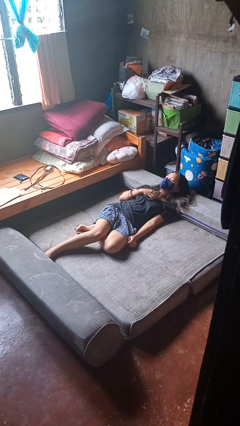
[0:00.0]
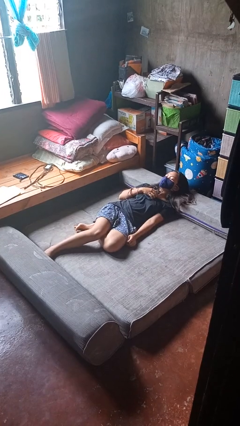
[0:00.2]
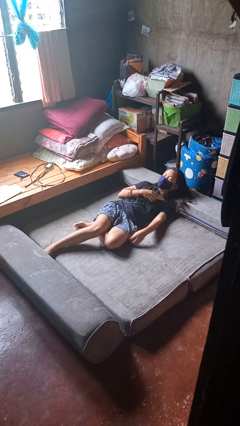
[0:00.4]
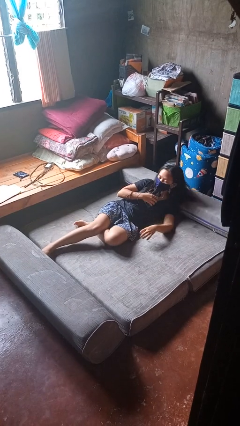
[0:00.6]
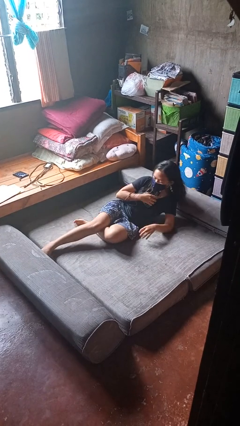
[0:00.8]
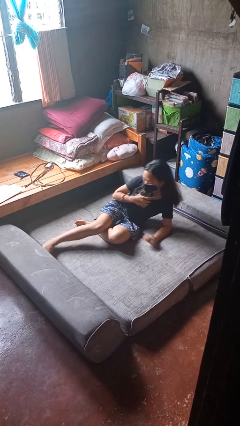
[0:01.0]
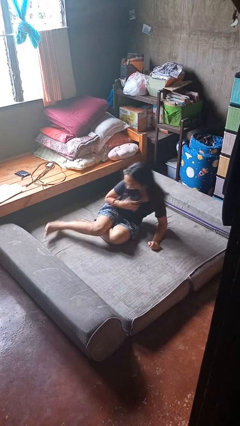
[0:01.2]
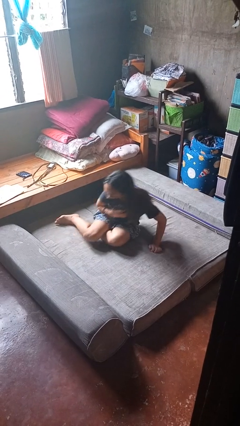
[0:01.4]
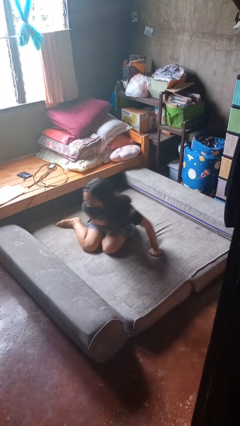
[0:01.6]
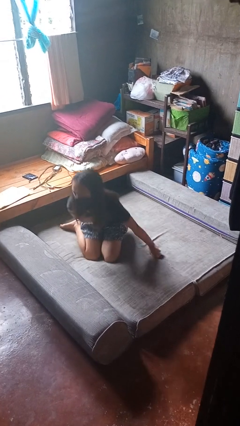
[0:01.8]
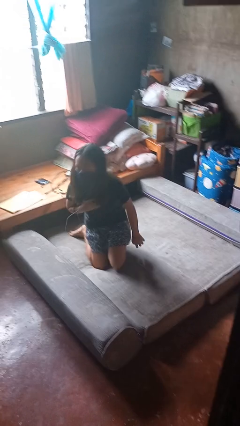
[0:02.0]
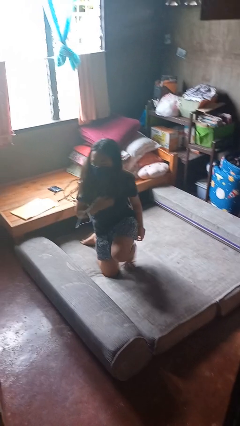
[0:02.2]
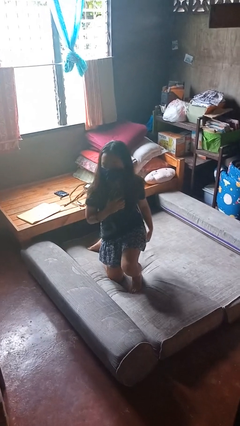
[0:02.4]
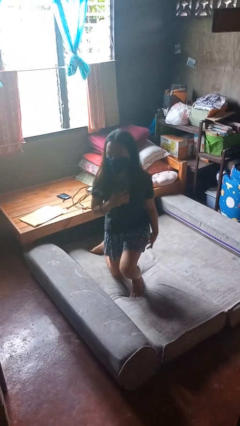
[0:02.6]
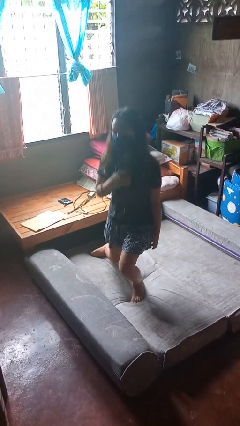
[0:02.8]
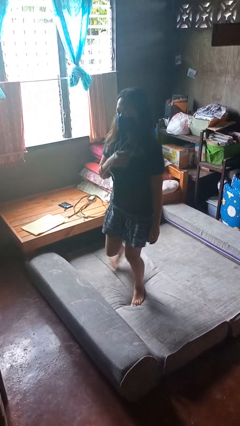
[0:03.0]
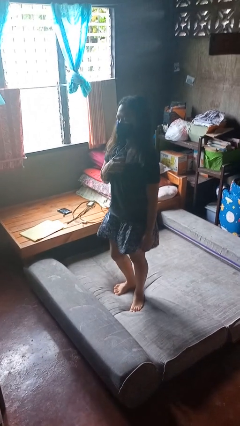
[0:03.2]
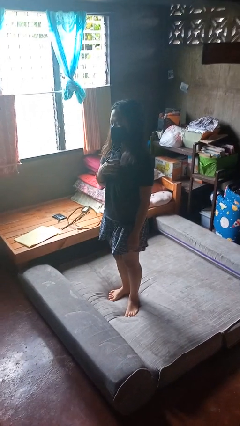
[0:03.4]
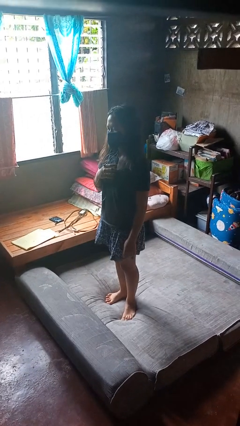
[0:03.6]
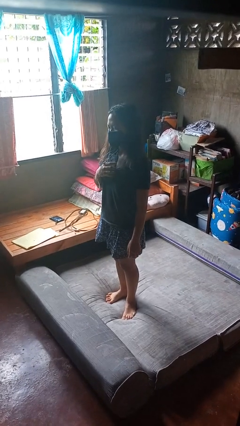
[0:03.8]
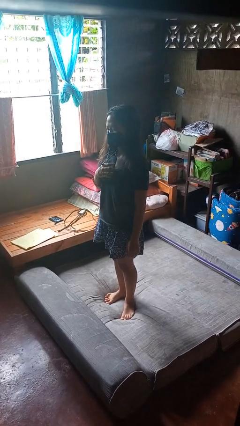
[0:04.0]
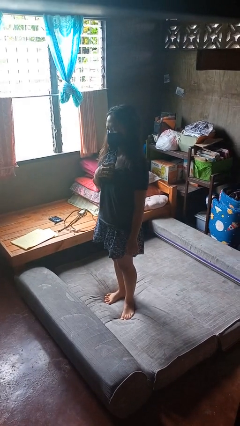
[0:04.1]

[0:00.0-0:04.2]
person stands up

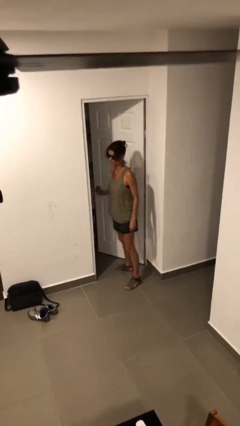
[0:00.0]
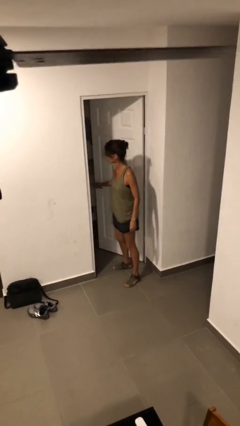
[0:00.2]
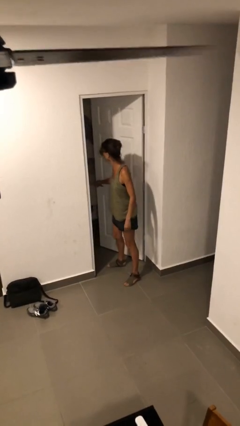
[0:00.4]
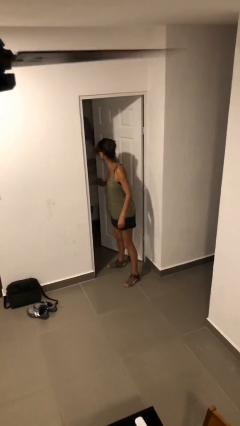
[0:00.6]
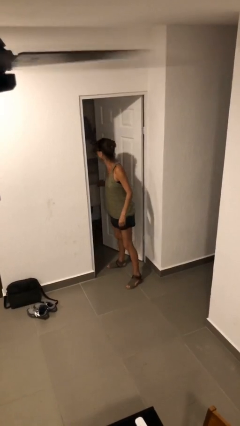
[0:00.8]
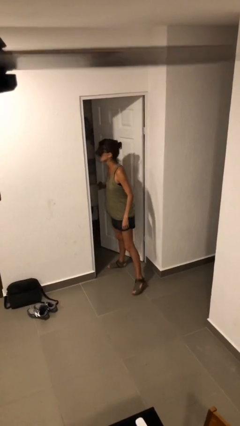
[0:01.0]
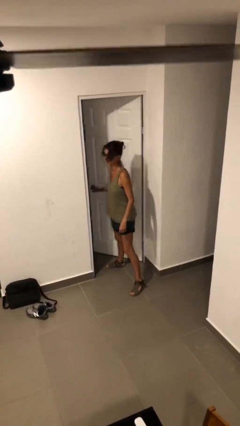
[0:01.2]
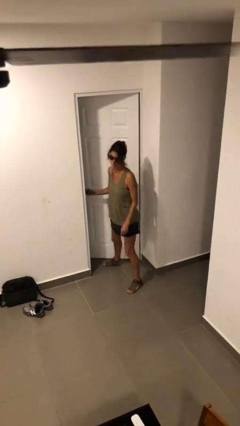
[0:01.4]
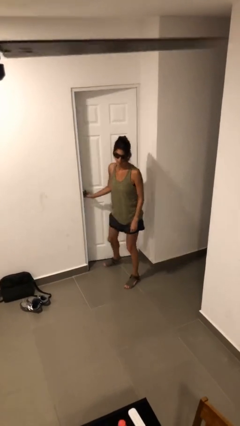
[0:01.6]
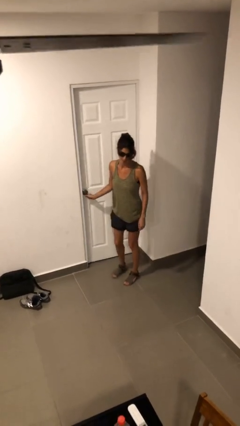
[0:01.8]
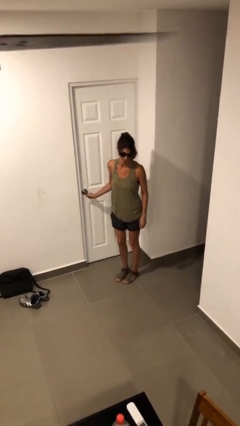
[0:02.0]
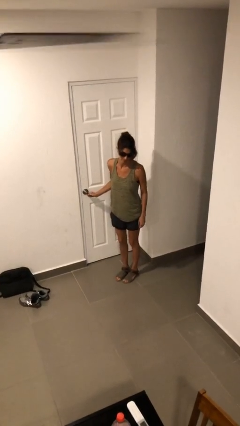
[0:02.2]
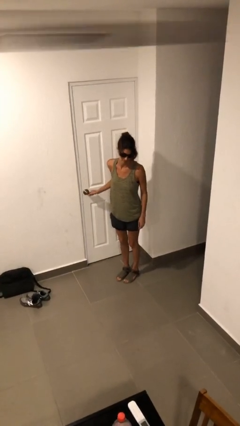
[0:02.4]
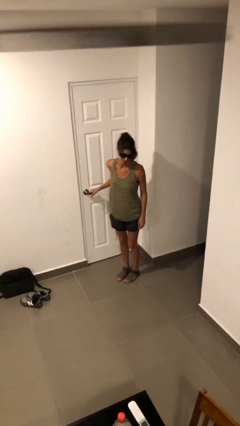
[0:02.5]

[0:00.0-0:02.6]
person closes facility door

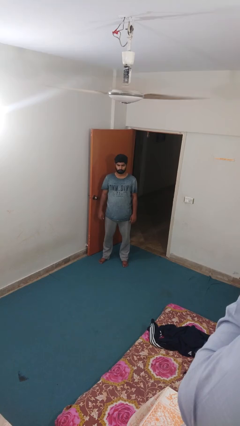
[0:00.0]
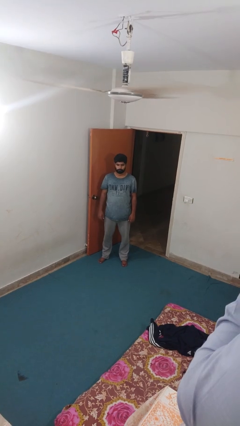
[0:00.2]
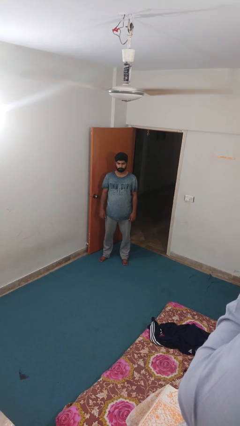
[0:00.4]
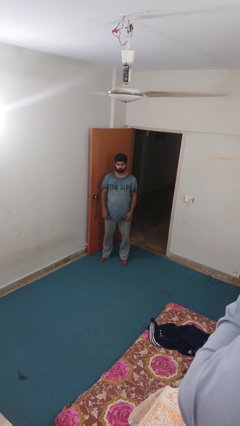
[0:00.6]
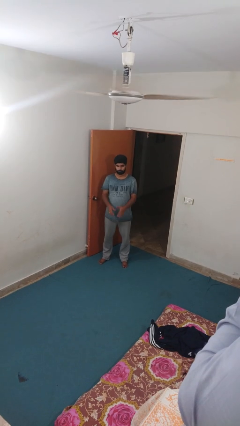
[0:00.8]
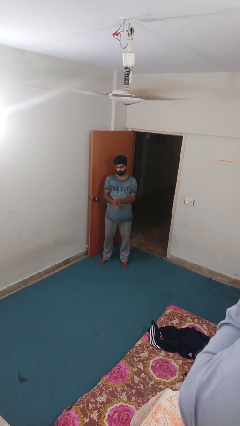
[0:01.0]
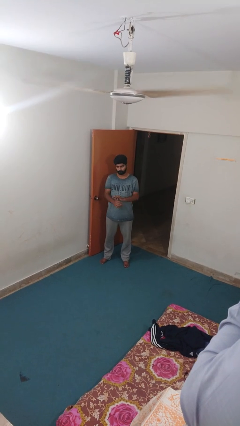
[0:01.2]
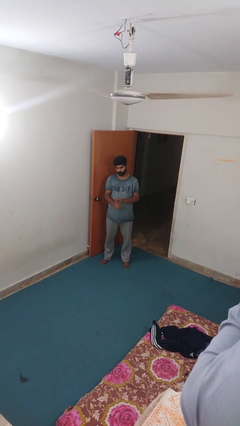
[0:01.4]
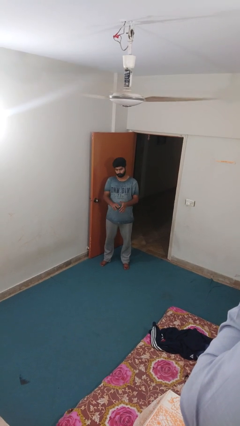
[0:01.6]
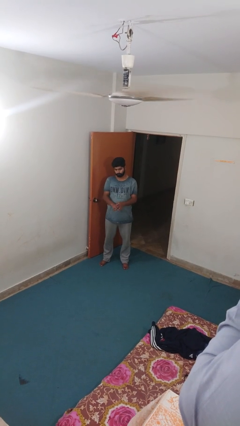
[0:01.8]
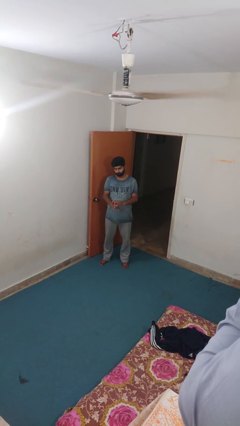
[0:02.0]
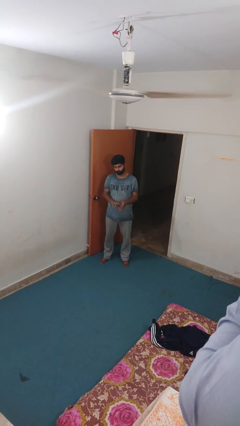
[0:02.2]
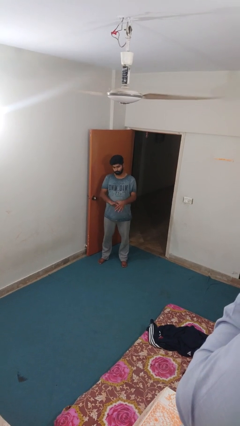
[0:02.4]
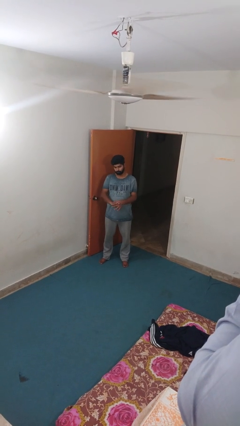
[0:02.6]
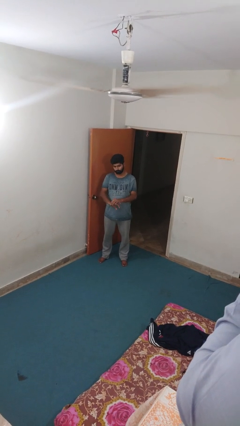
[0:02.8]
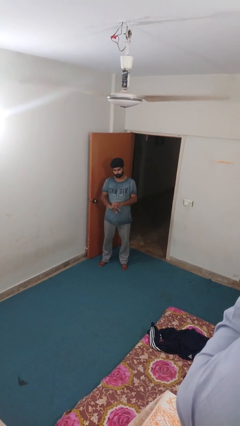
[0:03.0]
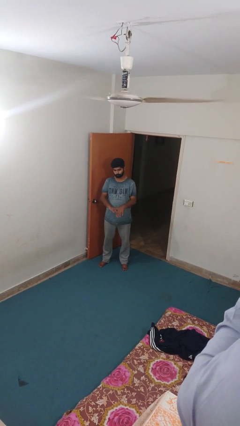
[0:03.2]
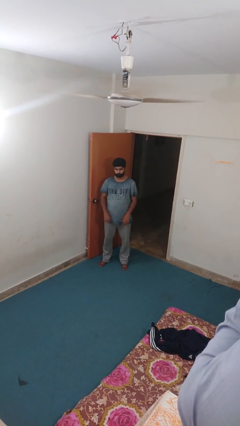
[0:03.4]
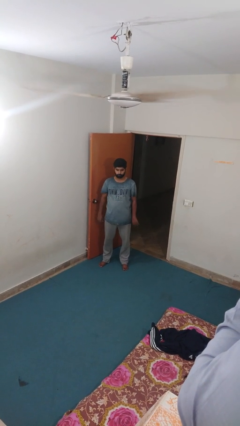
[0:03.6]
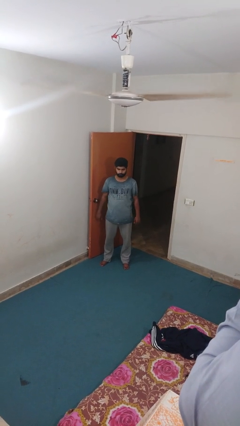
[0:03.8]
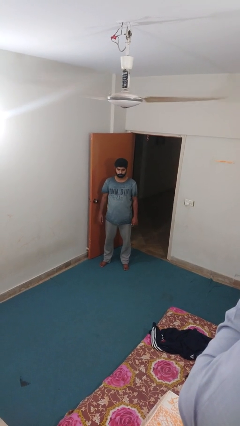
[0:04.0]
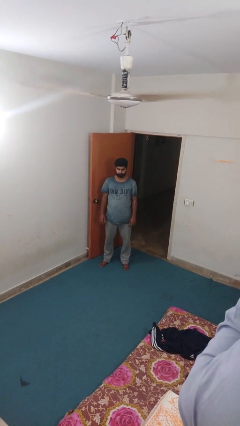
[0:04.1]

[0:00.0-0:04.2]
person snaps fingers

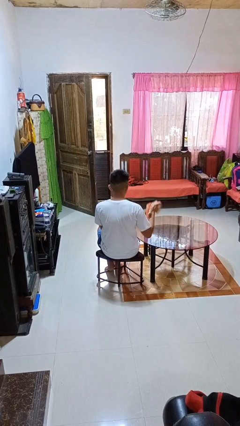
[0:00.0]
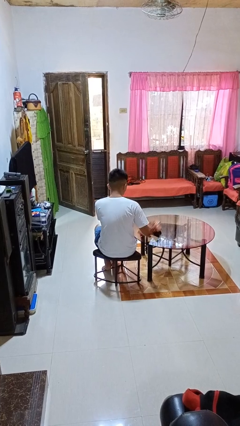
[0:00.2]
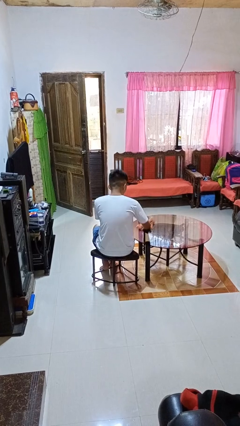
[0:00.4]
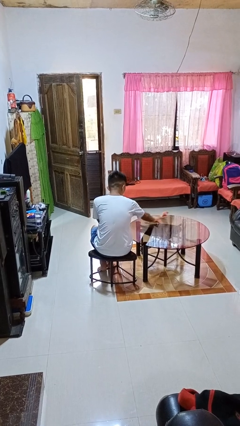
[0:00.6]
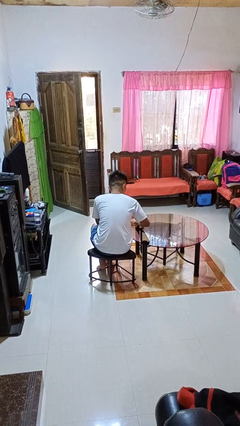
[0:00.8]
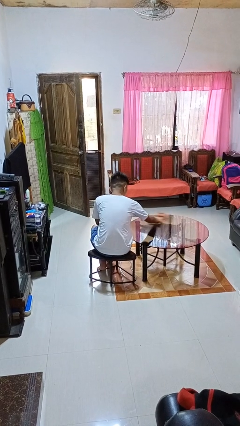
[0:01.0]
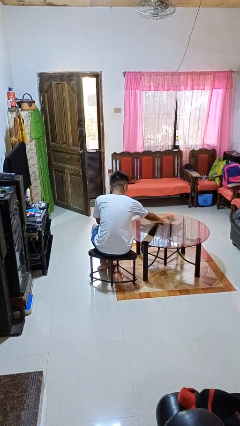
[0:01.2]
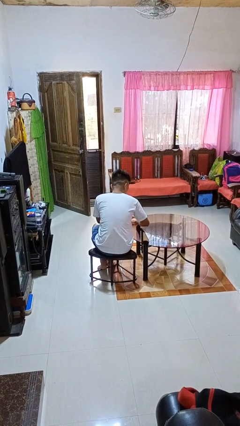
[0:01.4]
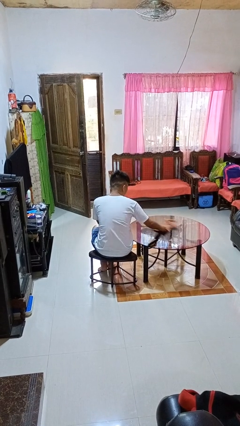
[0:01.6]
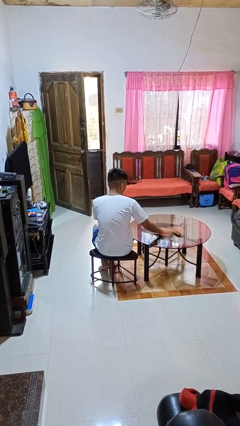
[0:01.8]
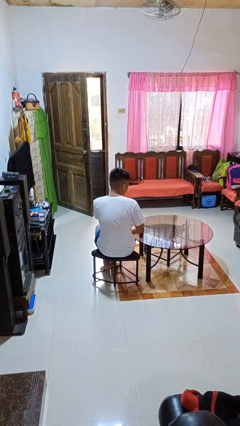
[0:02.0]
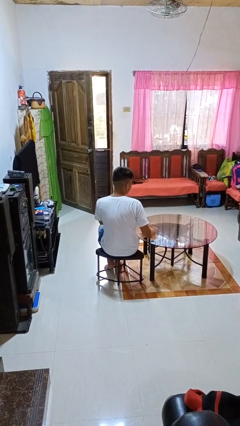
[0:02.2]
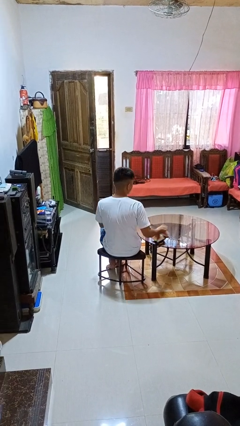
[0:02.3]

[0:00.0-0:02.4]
person cleans table with rag

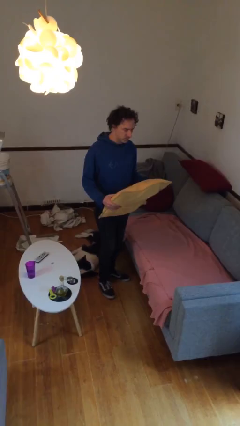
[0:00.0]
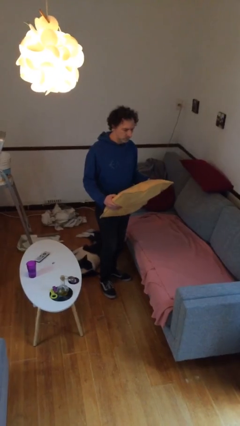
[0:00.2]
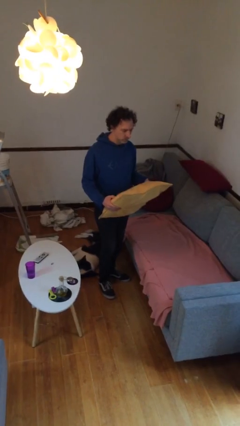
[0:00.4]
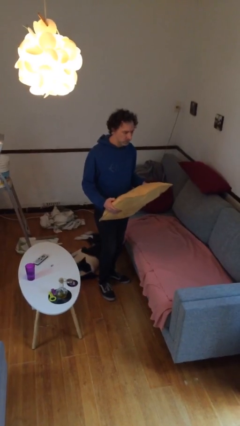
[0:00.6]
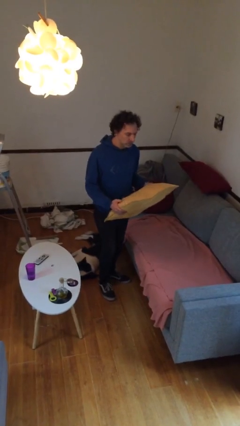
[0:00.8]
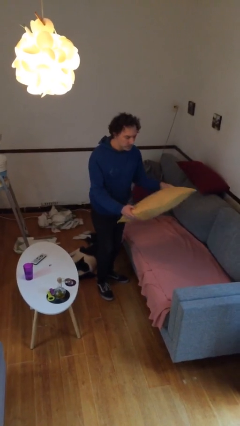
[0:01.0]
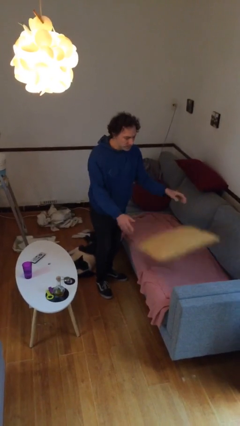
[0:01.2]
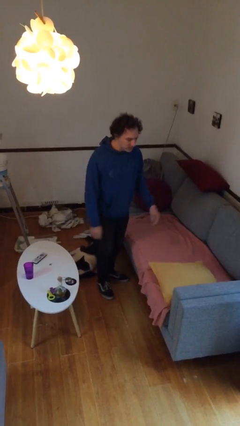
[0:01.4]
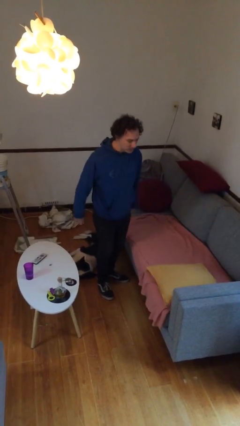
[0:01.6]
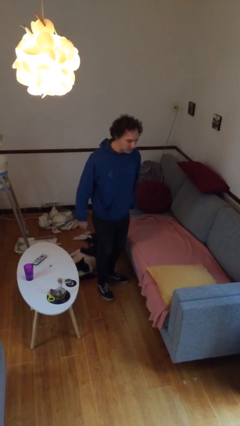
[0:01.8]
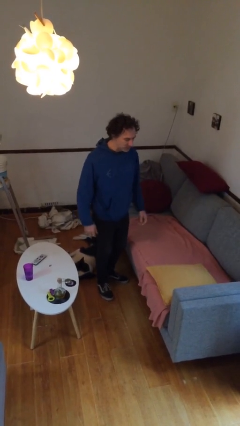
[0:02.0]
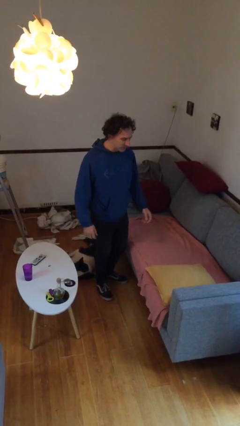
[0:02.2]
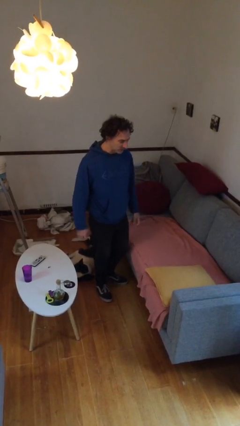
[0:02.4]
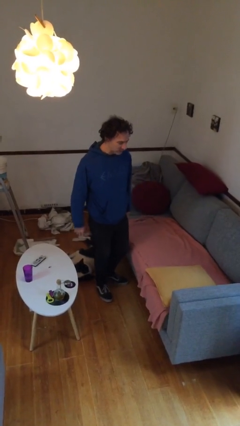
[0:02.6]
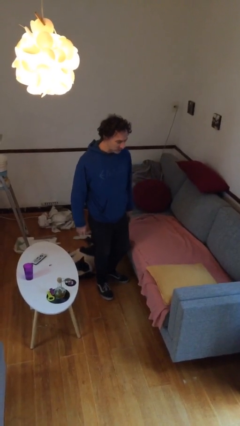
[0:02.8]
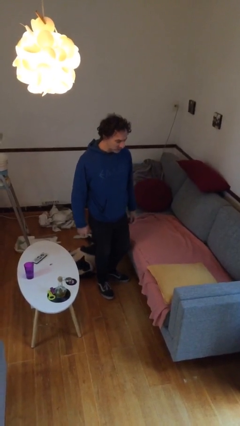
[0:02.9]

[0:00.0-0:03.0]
person puts down object on couch

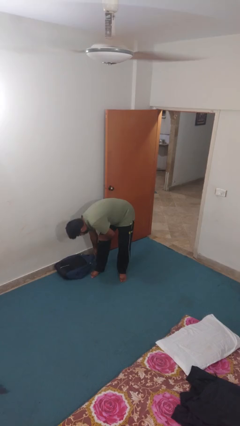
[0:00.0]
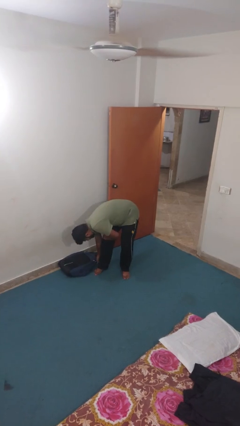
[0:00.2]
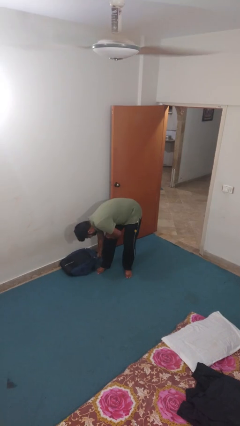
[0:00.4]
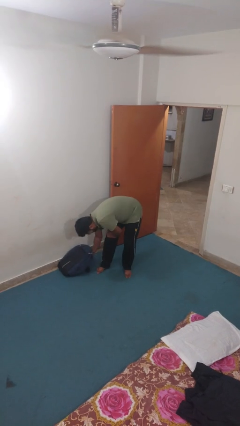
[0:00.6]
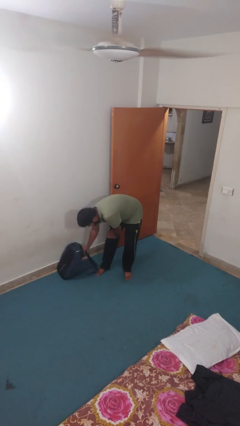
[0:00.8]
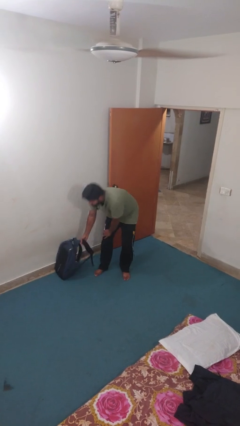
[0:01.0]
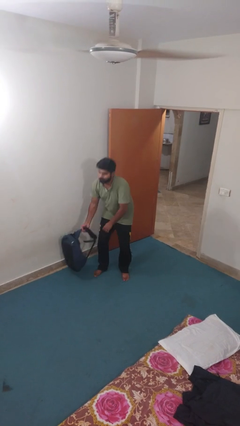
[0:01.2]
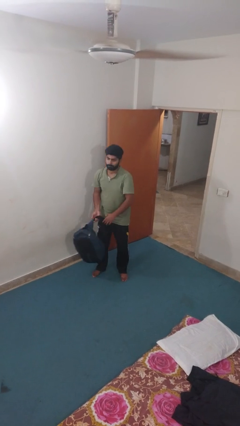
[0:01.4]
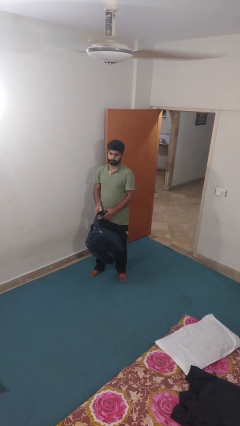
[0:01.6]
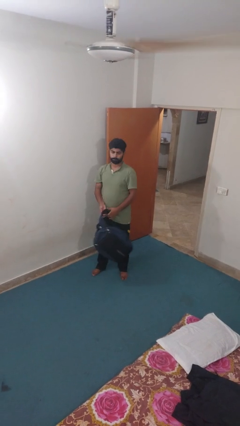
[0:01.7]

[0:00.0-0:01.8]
person picks up object from floor
